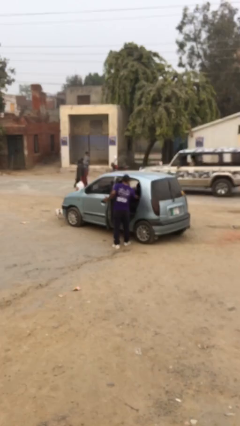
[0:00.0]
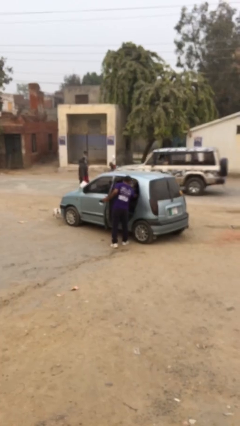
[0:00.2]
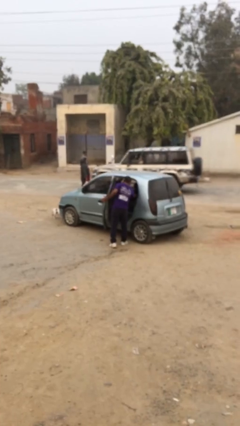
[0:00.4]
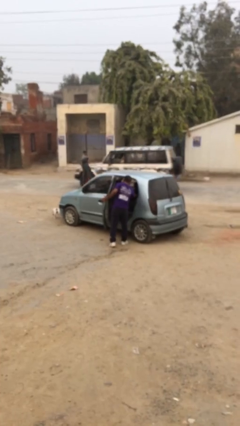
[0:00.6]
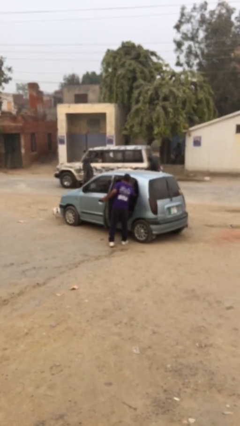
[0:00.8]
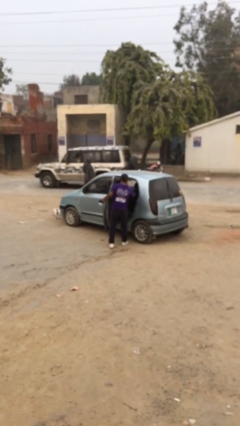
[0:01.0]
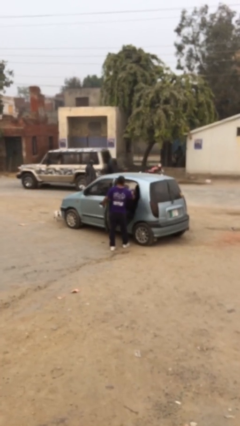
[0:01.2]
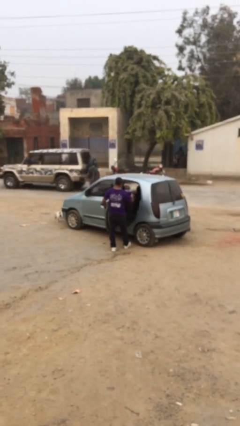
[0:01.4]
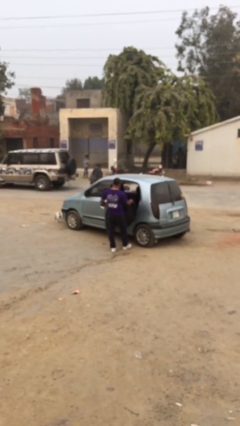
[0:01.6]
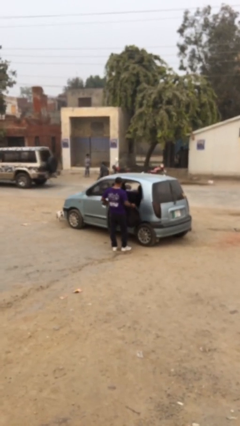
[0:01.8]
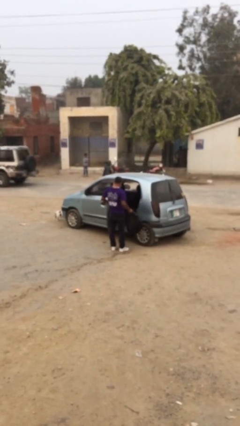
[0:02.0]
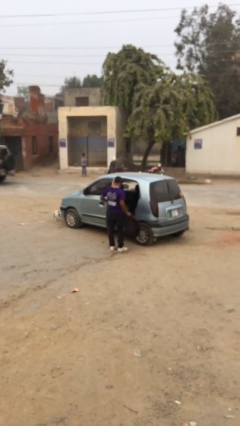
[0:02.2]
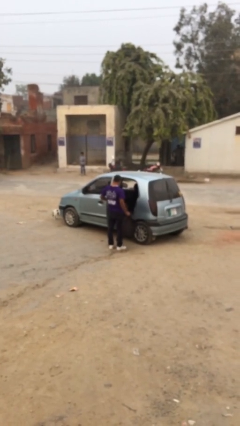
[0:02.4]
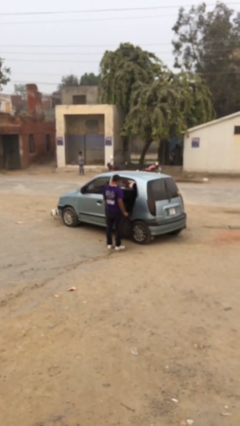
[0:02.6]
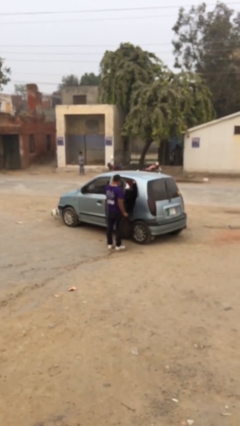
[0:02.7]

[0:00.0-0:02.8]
person unloads car

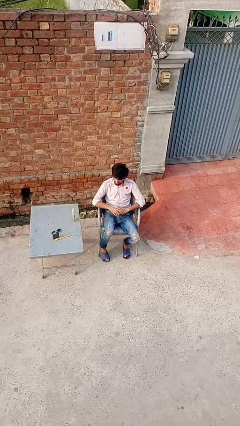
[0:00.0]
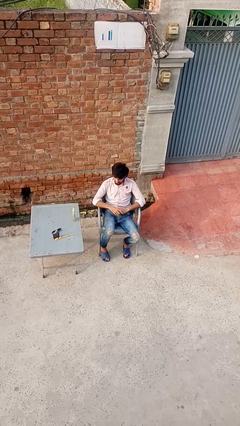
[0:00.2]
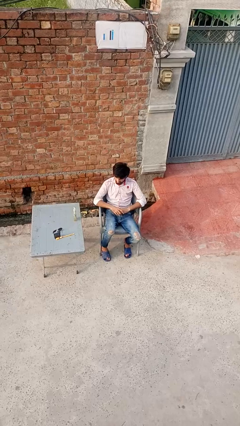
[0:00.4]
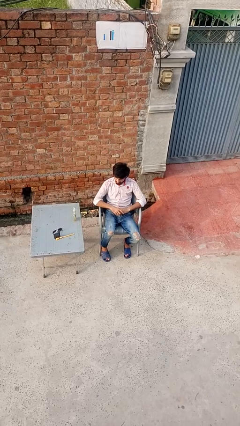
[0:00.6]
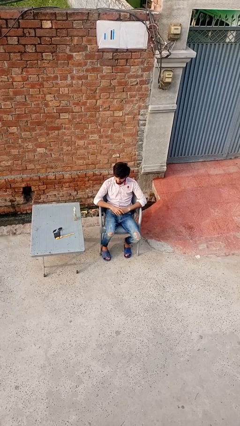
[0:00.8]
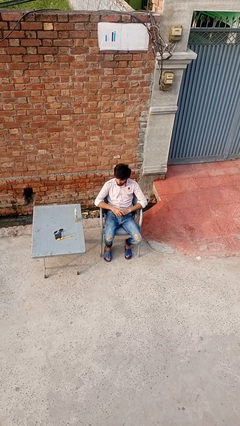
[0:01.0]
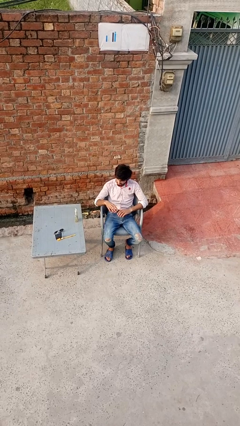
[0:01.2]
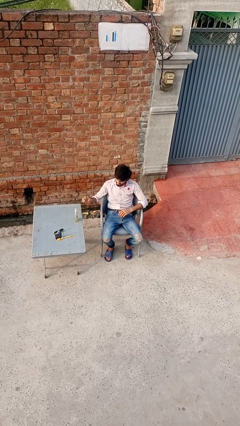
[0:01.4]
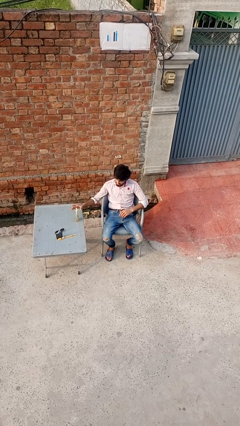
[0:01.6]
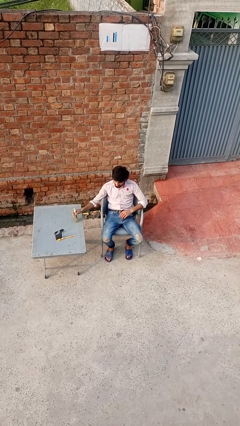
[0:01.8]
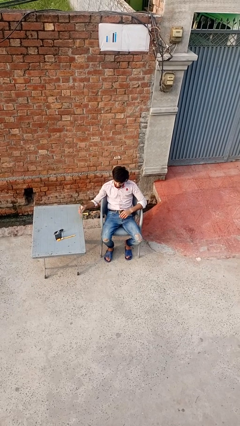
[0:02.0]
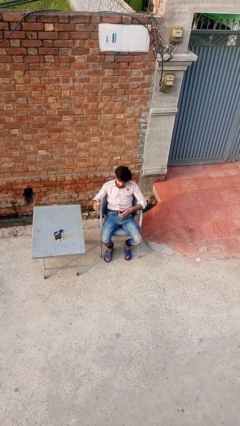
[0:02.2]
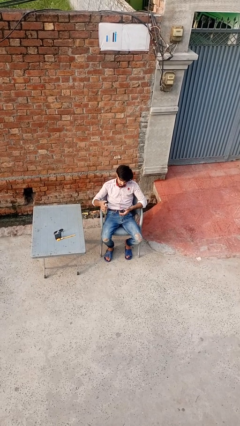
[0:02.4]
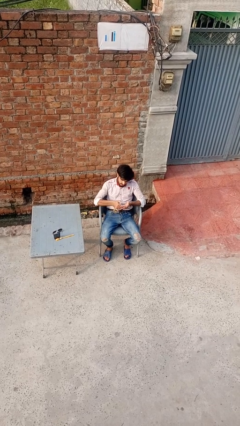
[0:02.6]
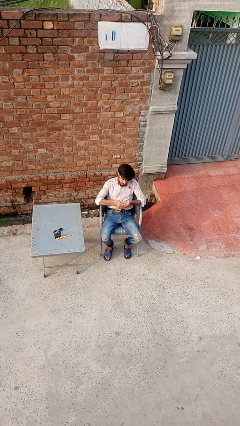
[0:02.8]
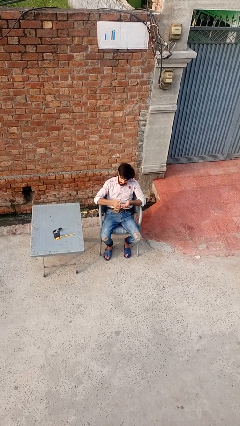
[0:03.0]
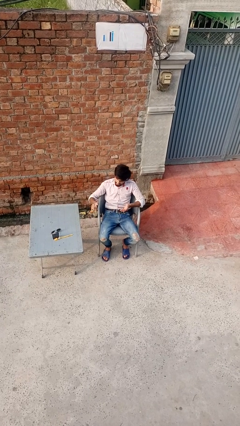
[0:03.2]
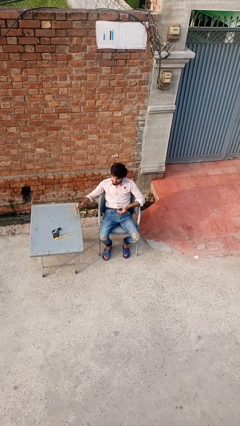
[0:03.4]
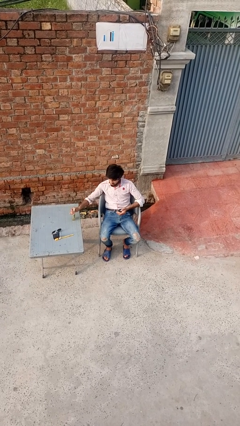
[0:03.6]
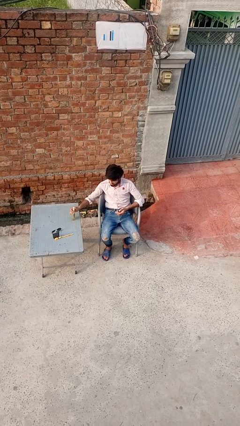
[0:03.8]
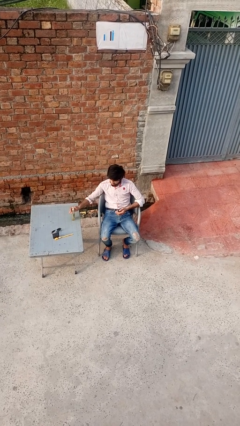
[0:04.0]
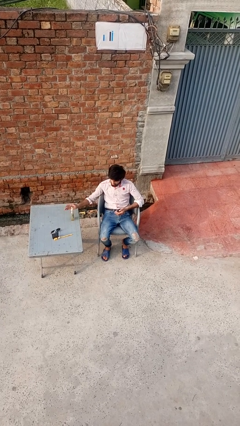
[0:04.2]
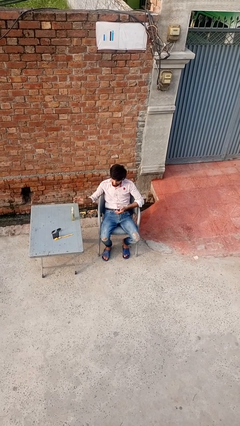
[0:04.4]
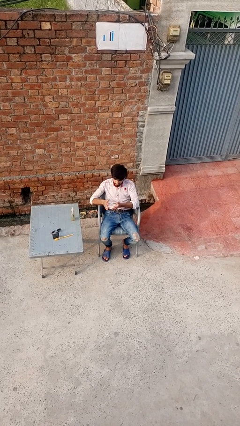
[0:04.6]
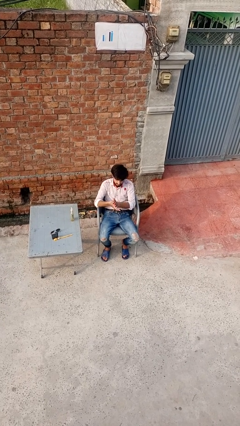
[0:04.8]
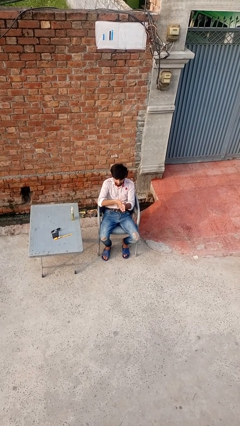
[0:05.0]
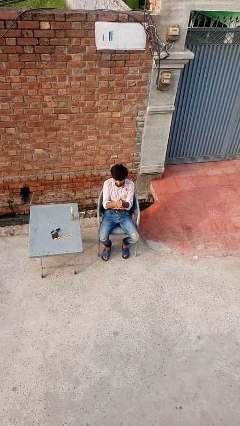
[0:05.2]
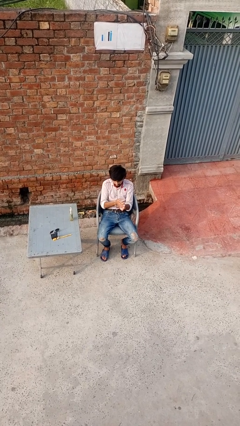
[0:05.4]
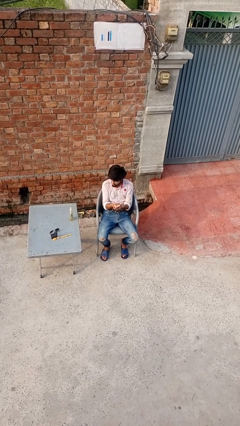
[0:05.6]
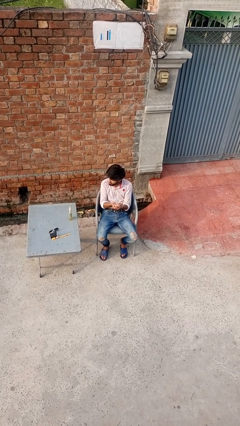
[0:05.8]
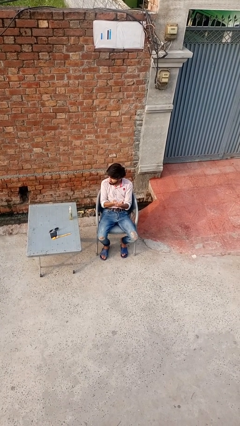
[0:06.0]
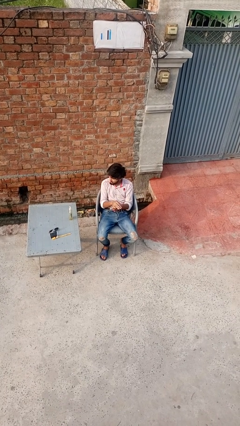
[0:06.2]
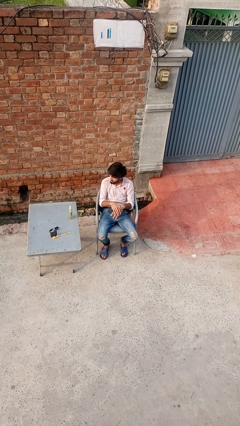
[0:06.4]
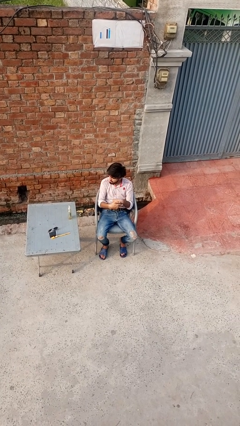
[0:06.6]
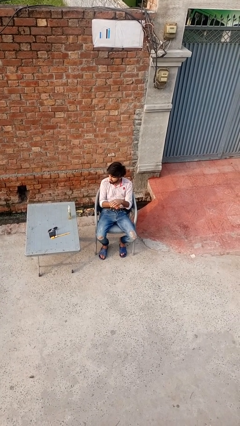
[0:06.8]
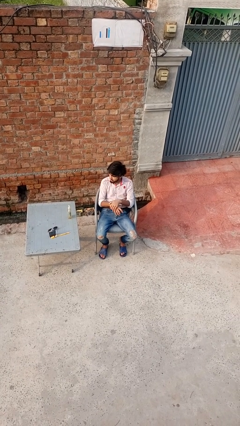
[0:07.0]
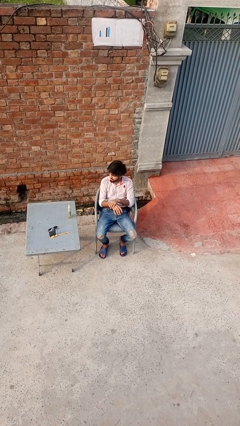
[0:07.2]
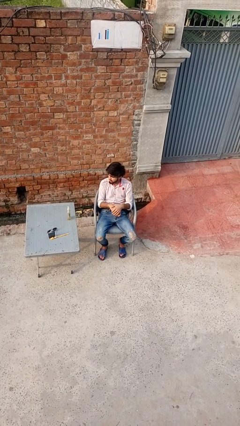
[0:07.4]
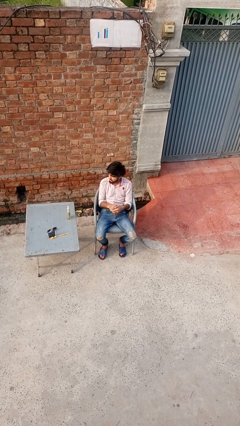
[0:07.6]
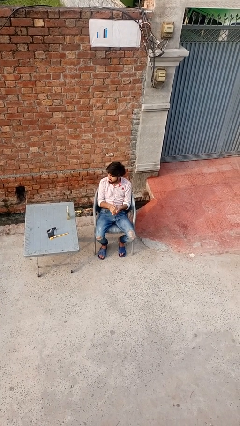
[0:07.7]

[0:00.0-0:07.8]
person applies sunscreen

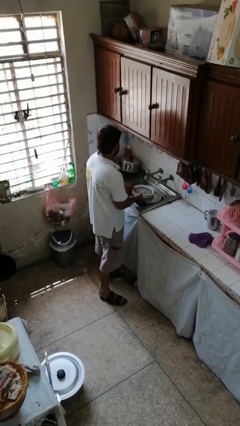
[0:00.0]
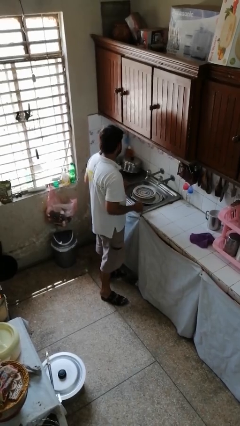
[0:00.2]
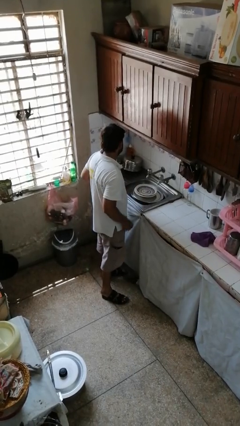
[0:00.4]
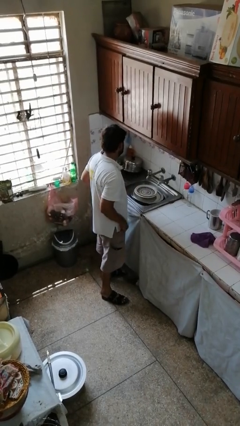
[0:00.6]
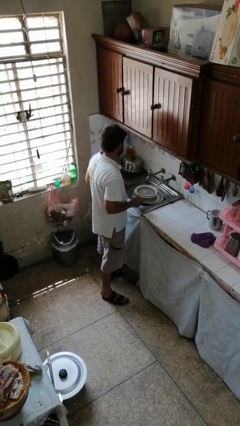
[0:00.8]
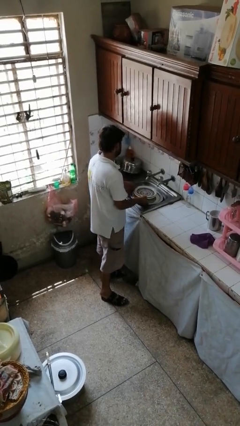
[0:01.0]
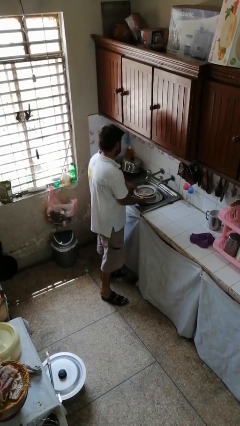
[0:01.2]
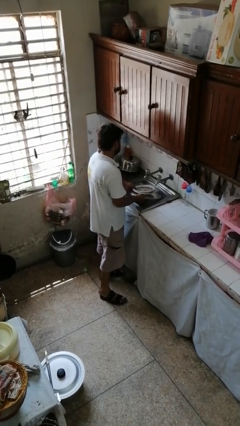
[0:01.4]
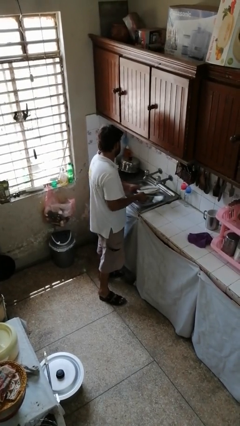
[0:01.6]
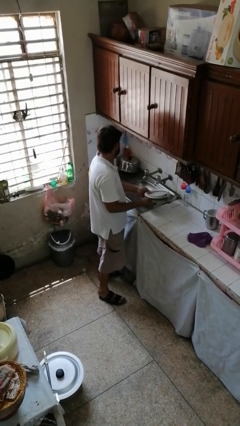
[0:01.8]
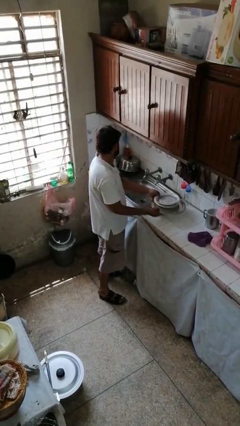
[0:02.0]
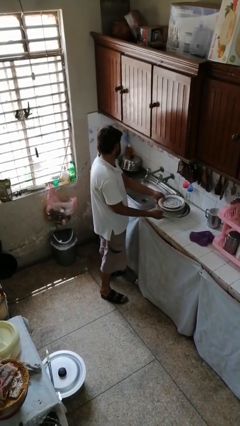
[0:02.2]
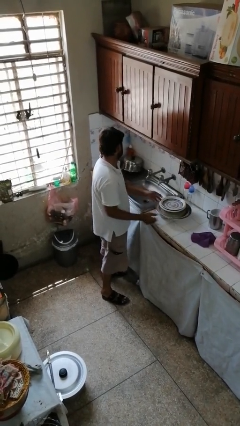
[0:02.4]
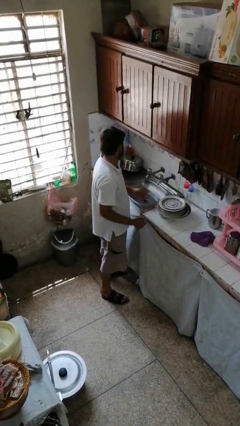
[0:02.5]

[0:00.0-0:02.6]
person unloads dishwasher

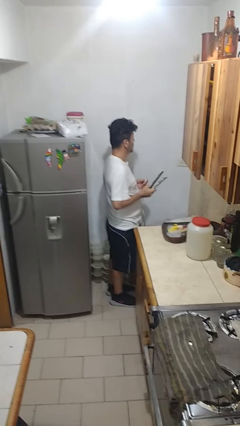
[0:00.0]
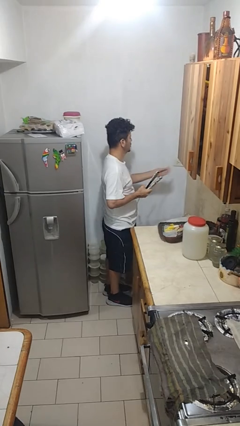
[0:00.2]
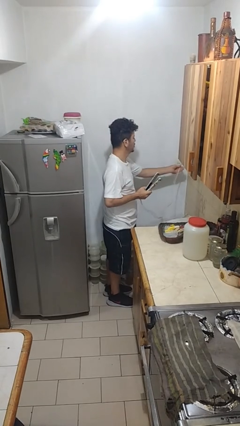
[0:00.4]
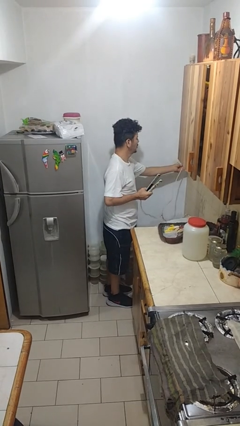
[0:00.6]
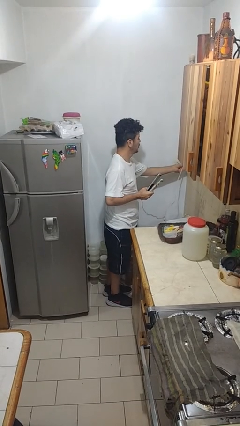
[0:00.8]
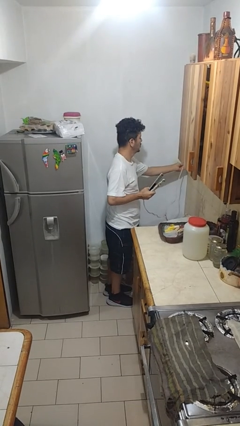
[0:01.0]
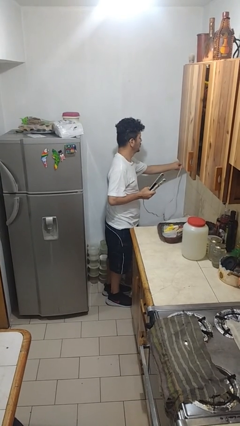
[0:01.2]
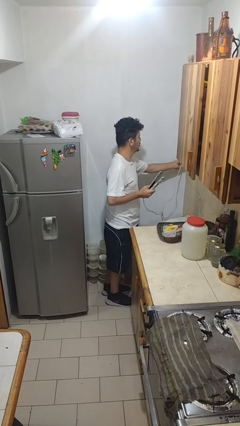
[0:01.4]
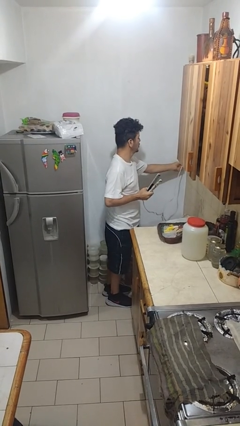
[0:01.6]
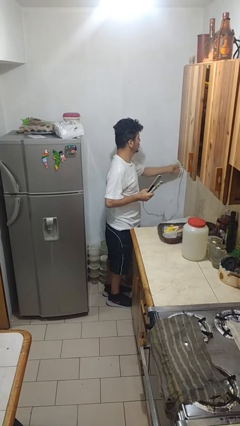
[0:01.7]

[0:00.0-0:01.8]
person plugs into electrical socket

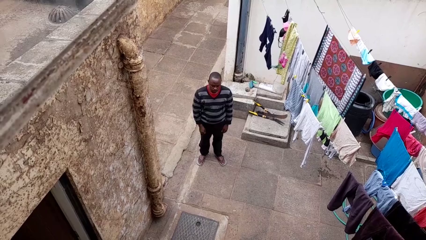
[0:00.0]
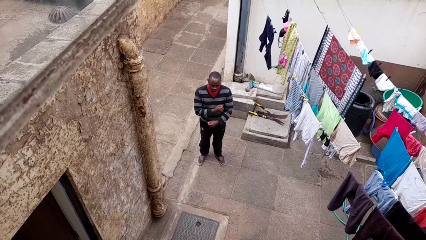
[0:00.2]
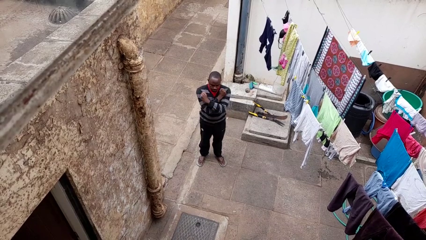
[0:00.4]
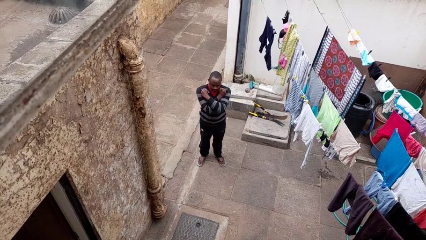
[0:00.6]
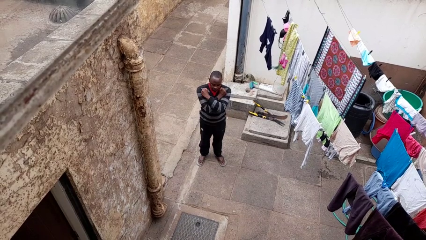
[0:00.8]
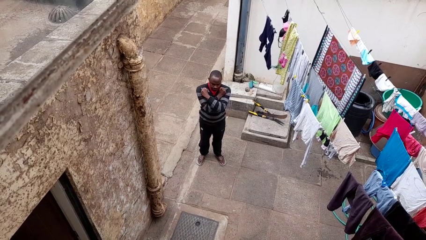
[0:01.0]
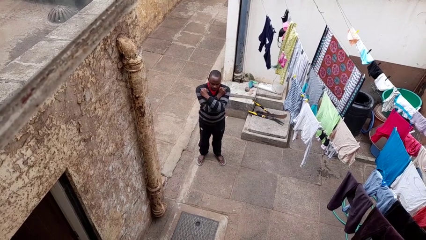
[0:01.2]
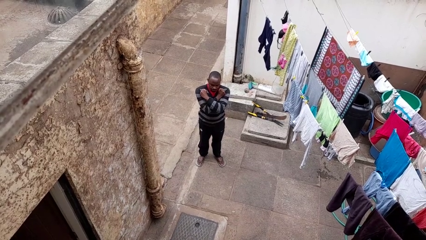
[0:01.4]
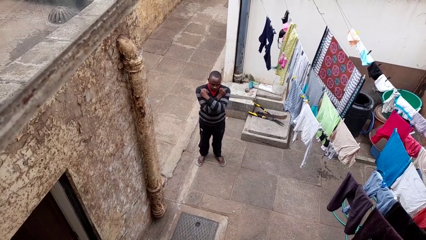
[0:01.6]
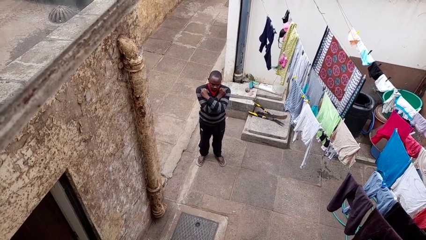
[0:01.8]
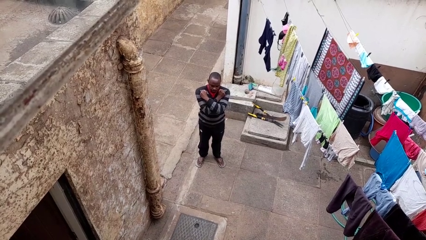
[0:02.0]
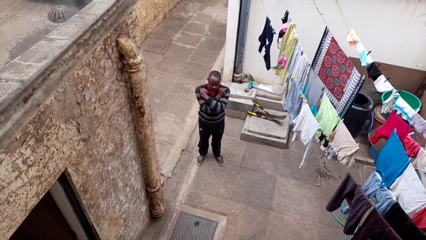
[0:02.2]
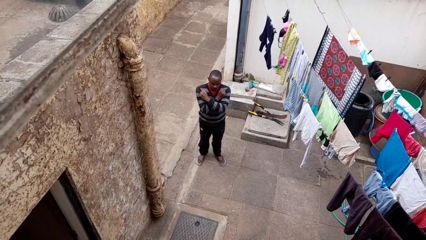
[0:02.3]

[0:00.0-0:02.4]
person gestures arms x
